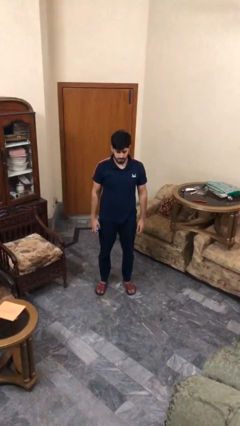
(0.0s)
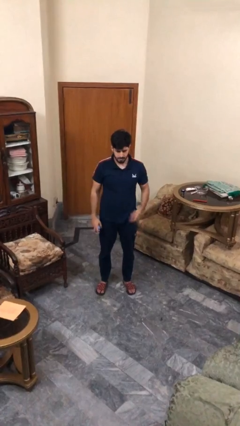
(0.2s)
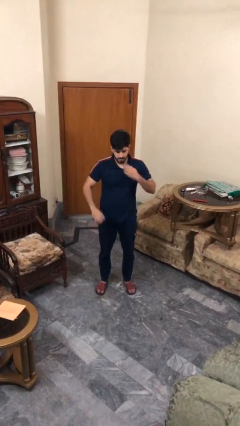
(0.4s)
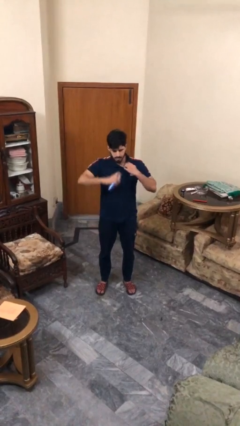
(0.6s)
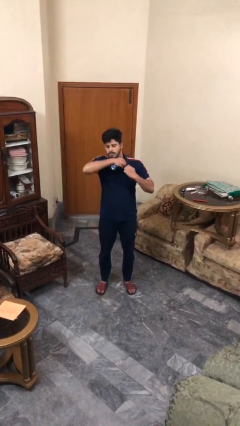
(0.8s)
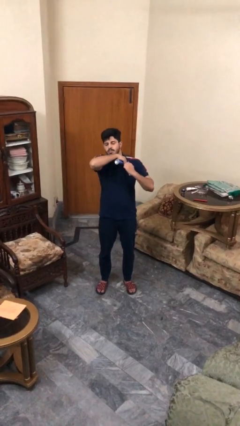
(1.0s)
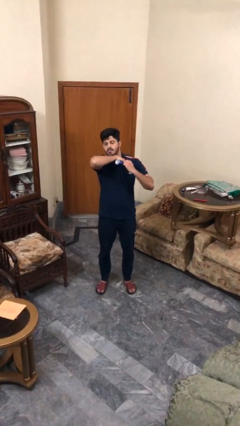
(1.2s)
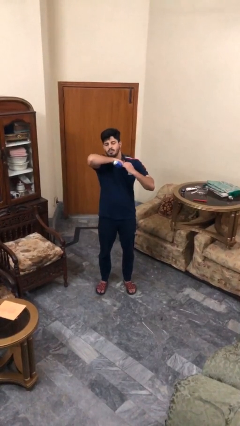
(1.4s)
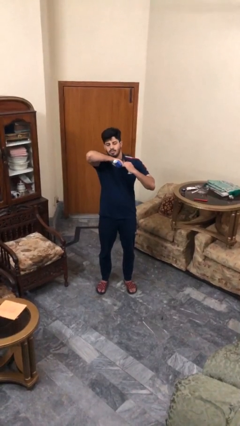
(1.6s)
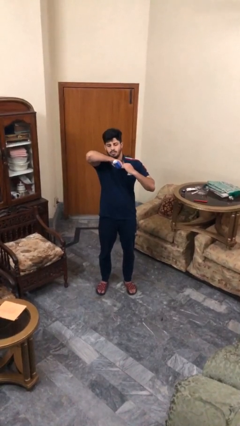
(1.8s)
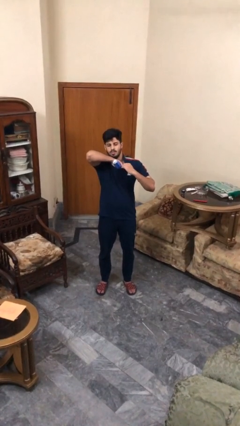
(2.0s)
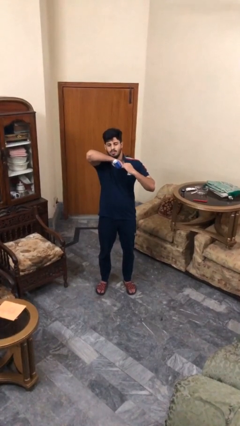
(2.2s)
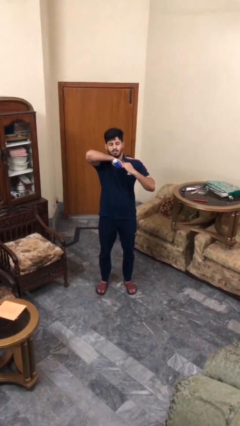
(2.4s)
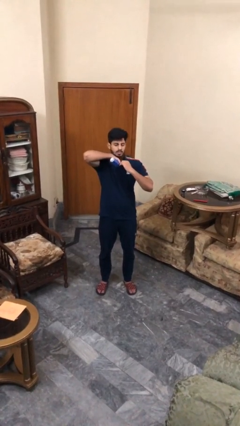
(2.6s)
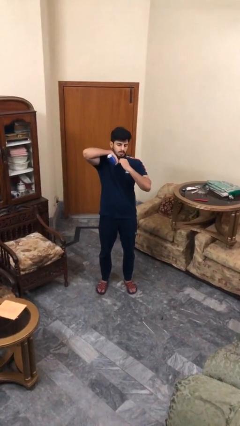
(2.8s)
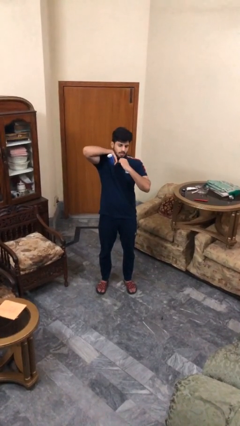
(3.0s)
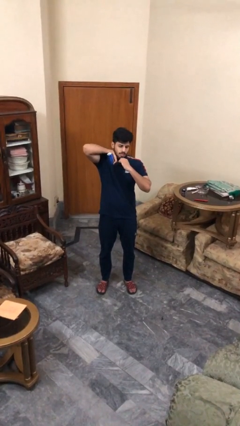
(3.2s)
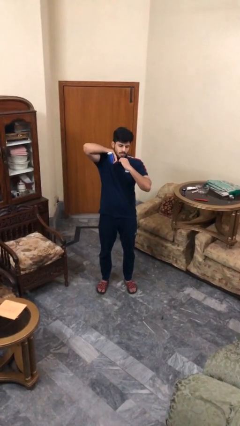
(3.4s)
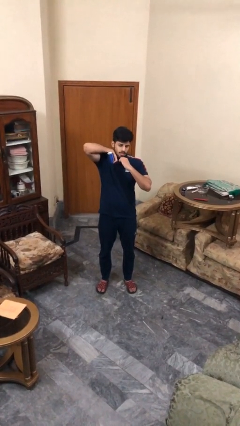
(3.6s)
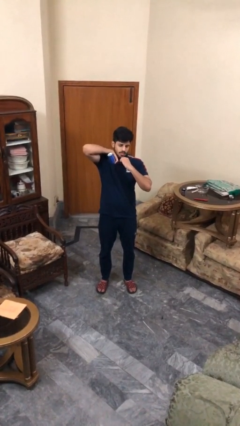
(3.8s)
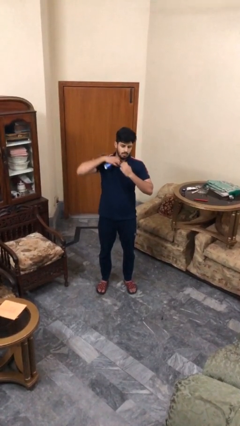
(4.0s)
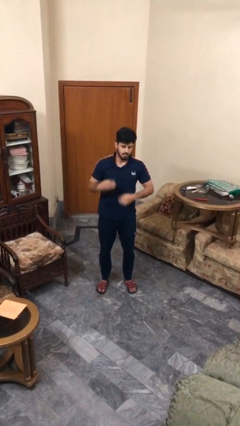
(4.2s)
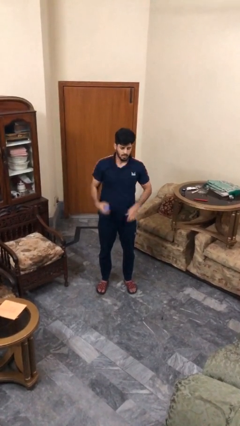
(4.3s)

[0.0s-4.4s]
person applies deodorant

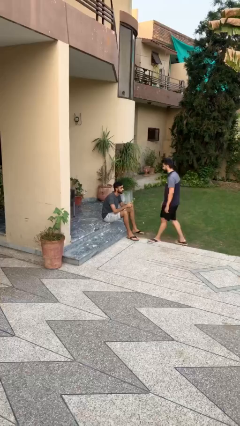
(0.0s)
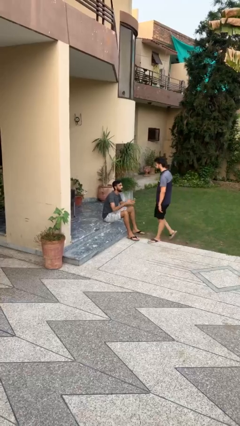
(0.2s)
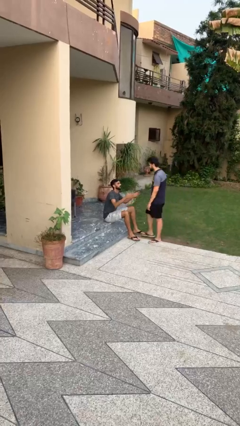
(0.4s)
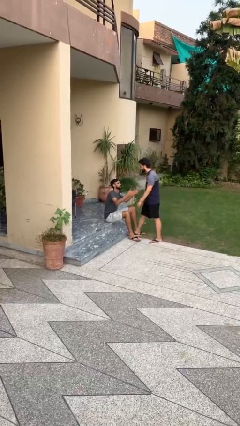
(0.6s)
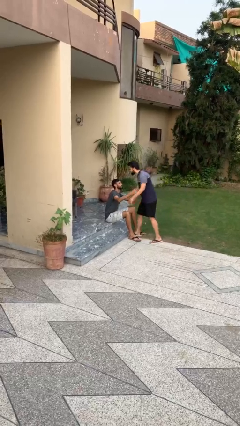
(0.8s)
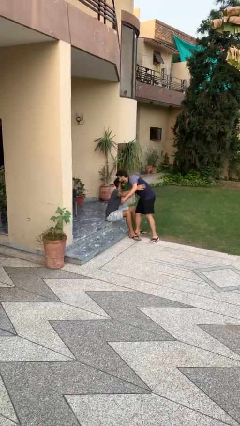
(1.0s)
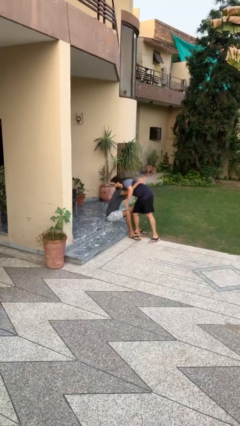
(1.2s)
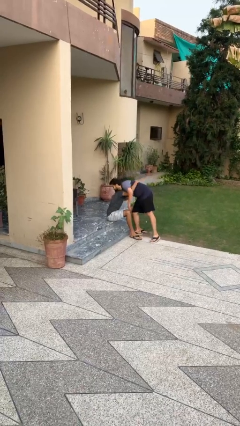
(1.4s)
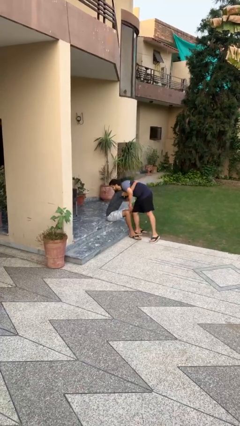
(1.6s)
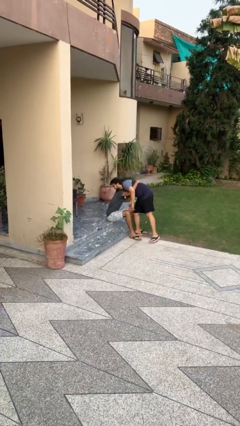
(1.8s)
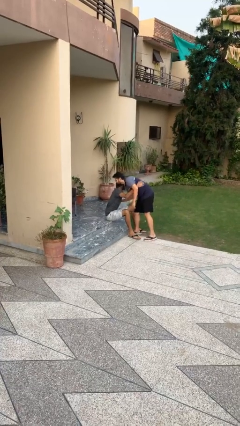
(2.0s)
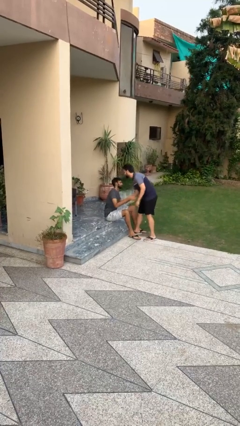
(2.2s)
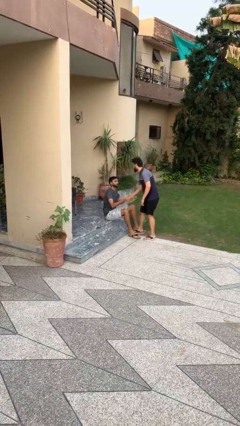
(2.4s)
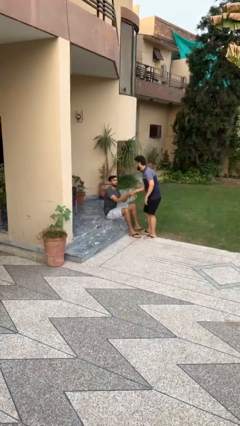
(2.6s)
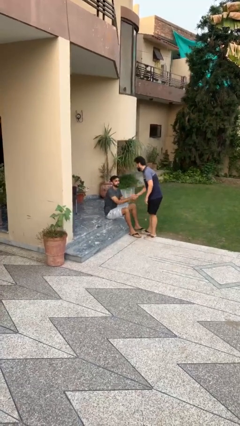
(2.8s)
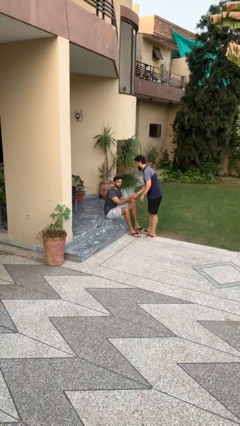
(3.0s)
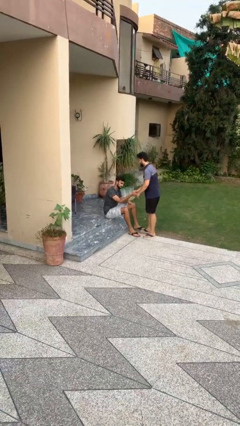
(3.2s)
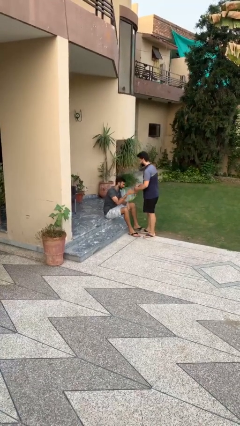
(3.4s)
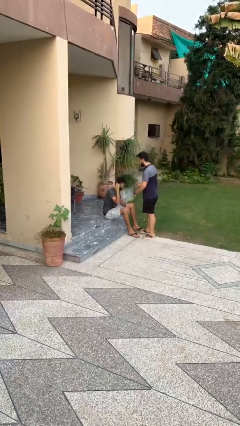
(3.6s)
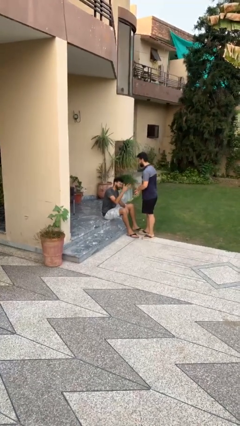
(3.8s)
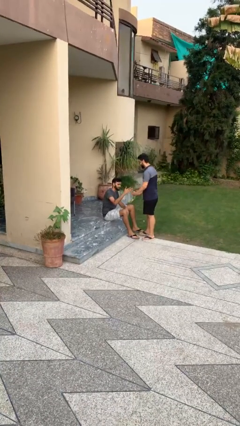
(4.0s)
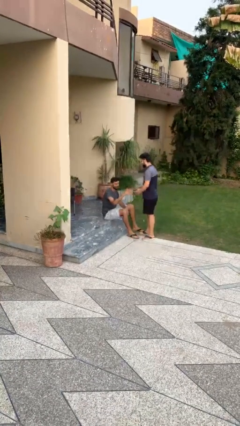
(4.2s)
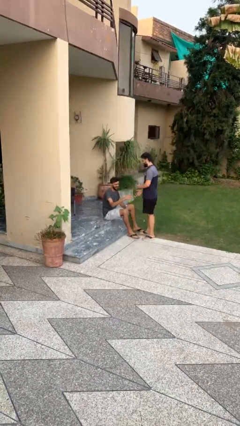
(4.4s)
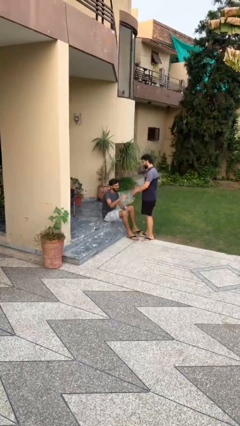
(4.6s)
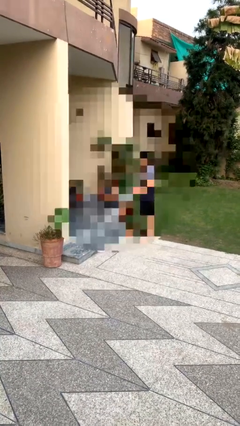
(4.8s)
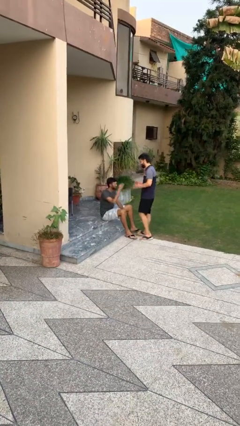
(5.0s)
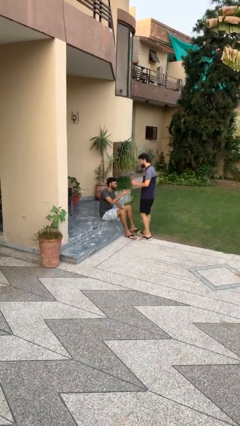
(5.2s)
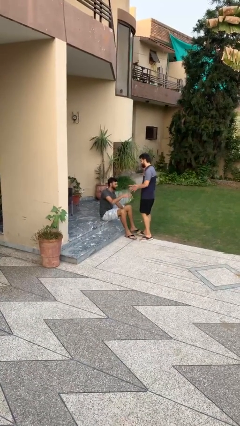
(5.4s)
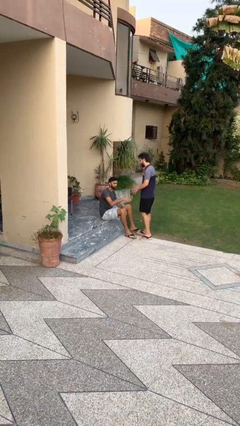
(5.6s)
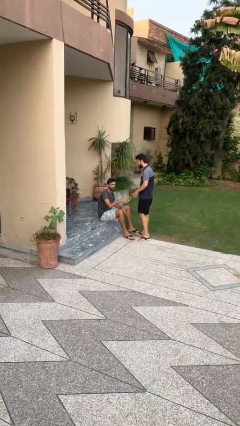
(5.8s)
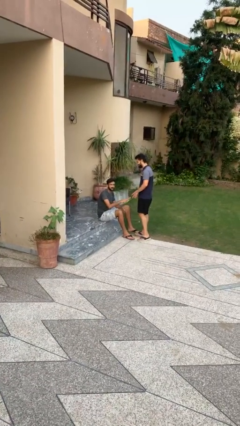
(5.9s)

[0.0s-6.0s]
person embraces person

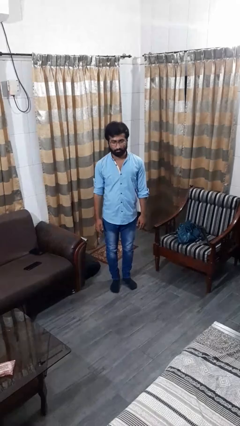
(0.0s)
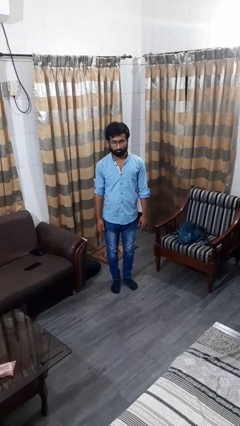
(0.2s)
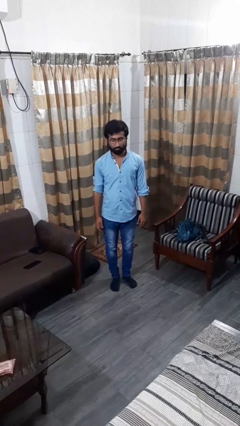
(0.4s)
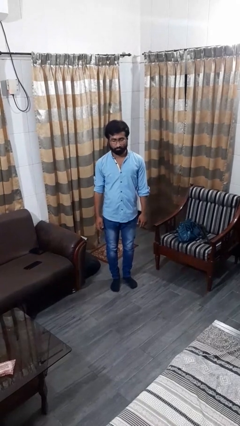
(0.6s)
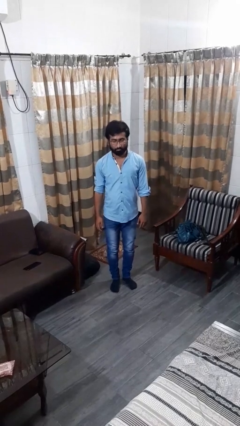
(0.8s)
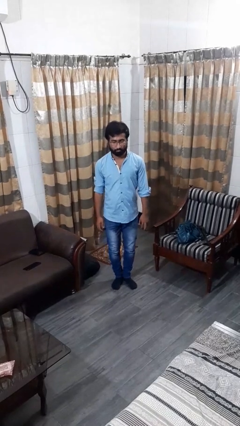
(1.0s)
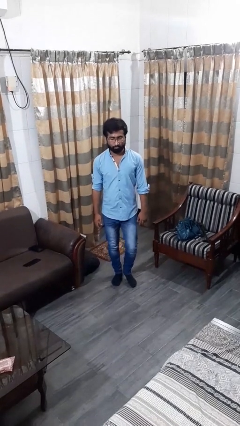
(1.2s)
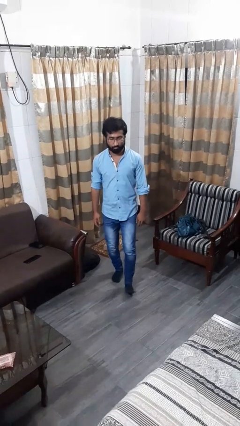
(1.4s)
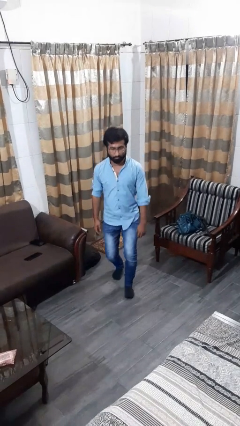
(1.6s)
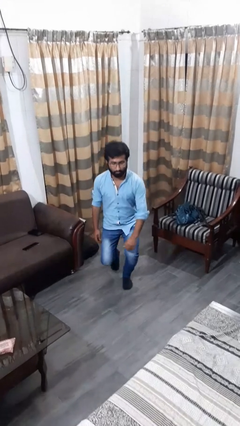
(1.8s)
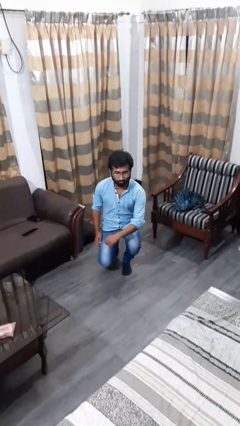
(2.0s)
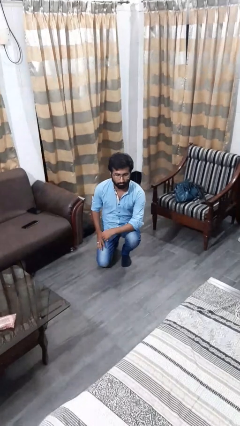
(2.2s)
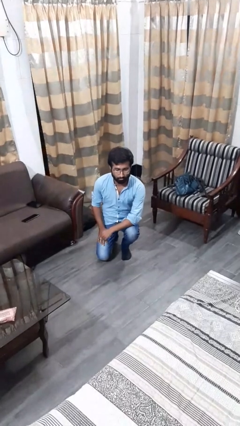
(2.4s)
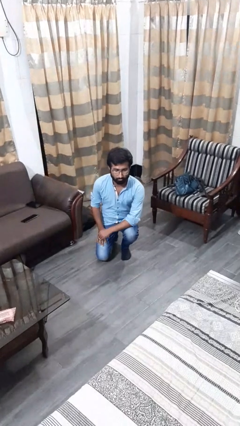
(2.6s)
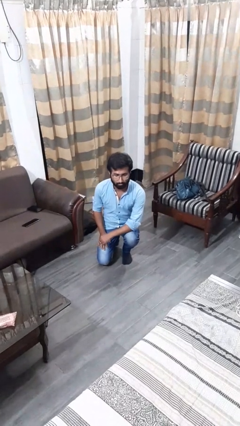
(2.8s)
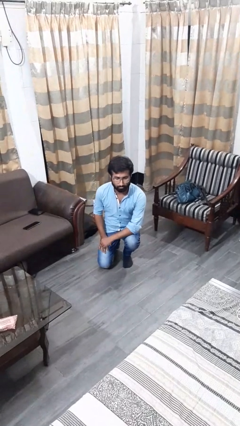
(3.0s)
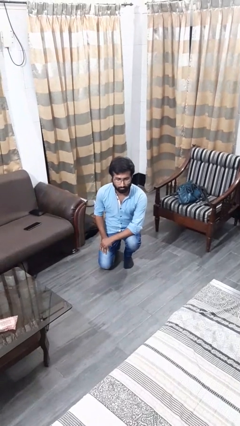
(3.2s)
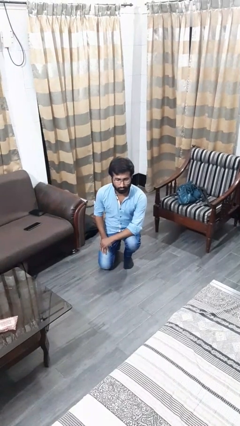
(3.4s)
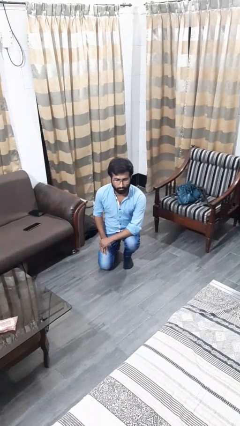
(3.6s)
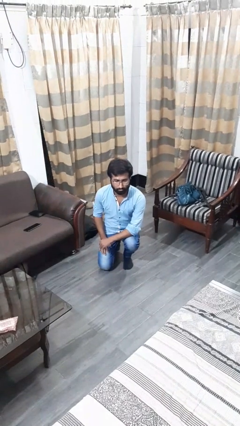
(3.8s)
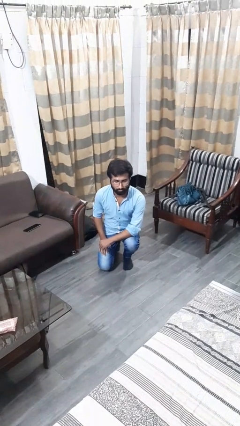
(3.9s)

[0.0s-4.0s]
person kneels

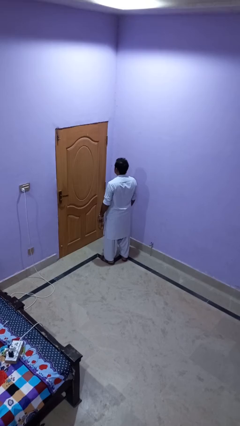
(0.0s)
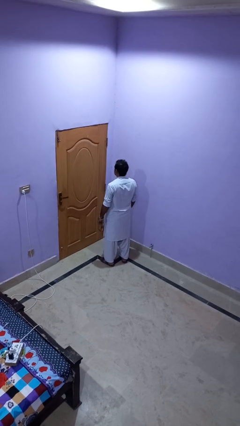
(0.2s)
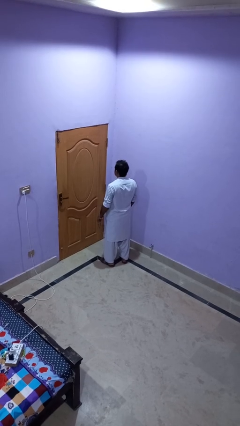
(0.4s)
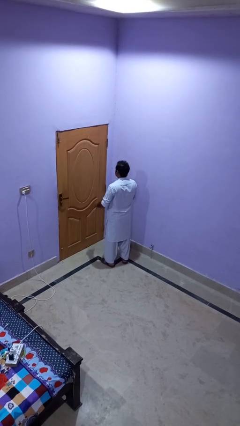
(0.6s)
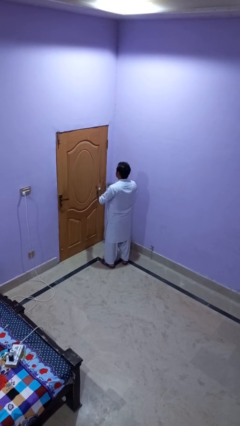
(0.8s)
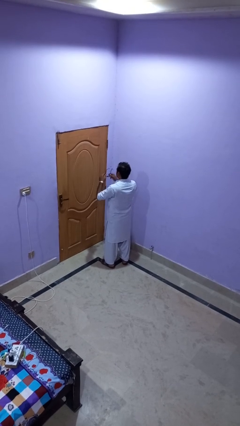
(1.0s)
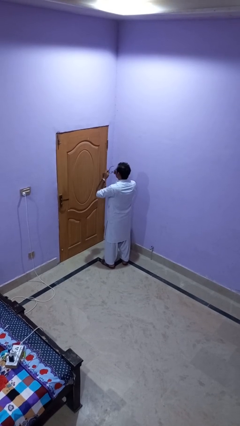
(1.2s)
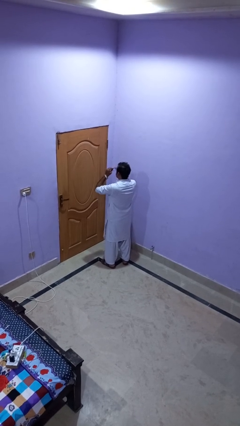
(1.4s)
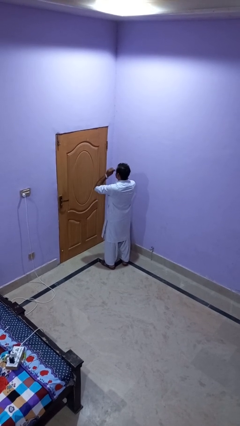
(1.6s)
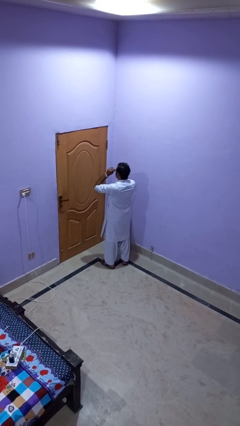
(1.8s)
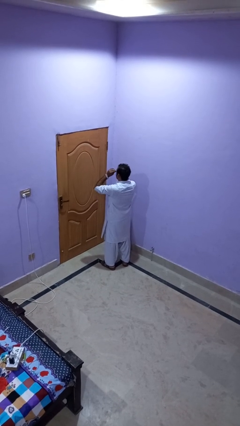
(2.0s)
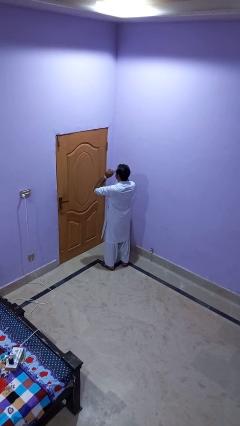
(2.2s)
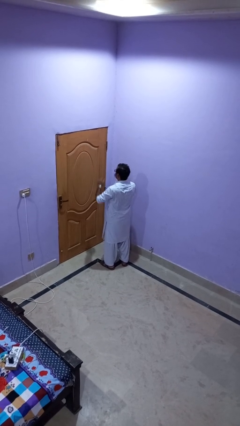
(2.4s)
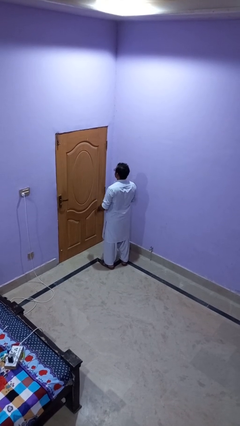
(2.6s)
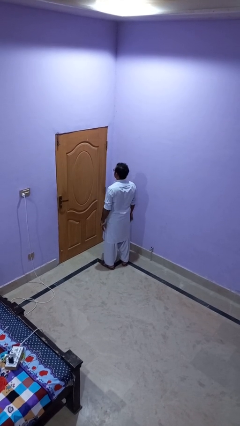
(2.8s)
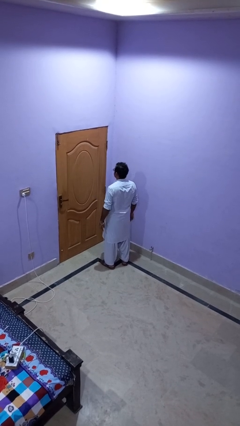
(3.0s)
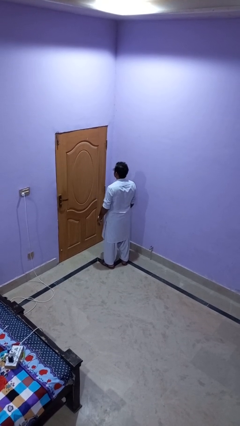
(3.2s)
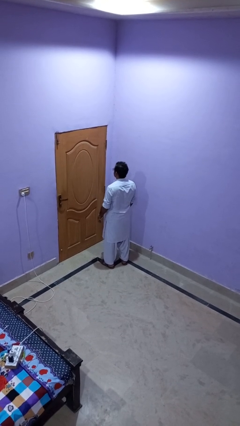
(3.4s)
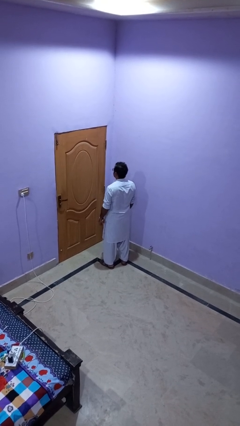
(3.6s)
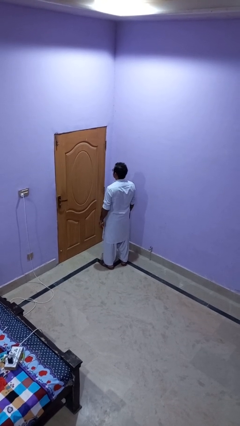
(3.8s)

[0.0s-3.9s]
person puts on glasses
